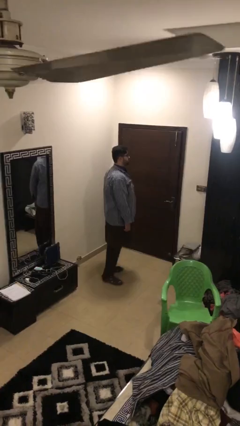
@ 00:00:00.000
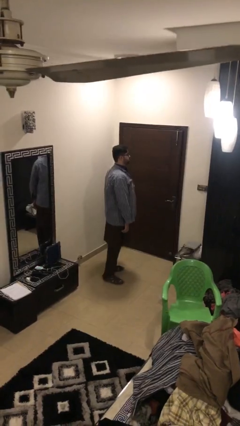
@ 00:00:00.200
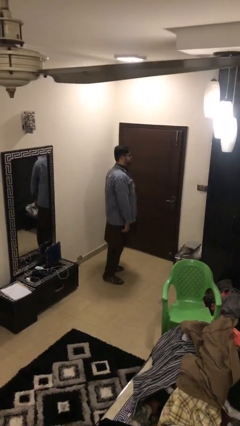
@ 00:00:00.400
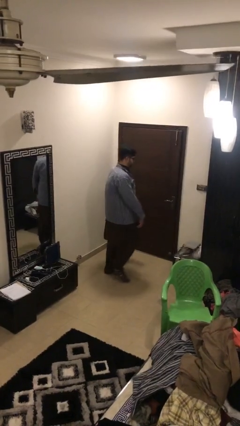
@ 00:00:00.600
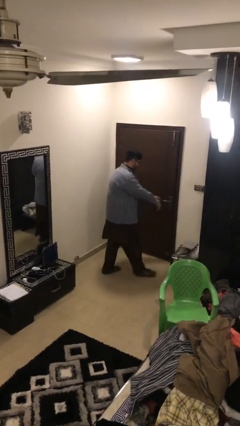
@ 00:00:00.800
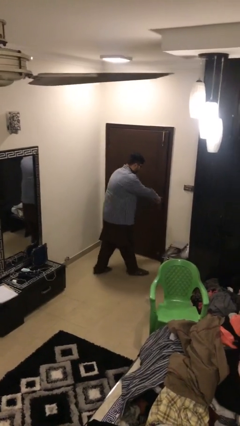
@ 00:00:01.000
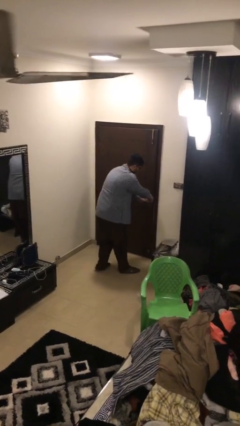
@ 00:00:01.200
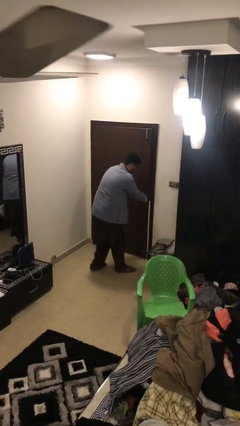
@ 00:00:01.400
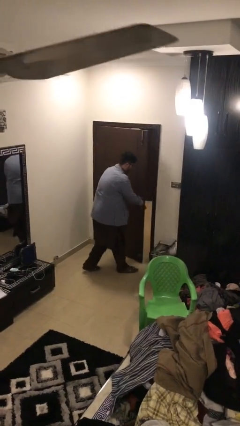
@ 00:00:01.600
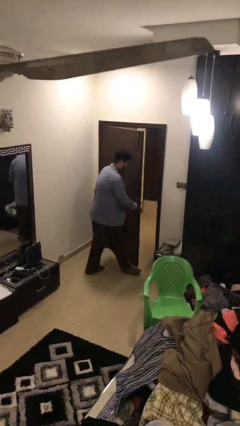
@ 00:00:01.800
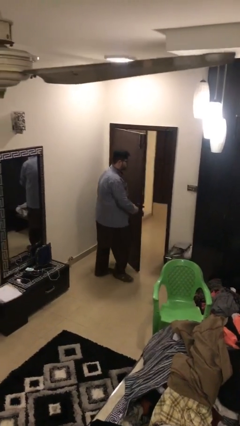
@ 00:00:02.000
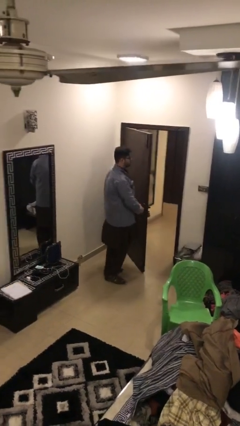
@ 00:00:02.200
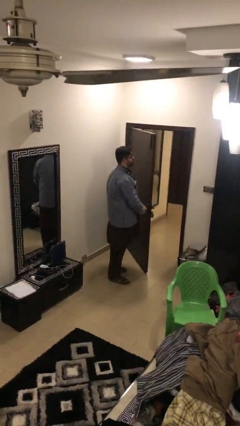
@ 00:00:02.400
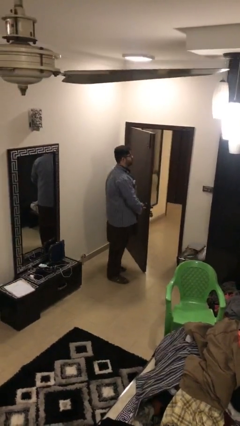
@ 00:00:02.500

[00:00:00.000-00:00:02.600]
person opens facility door

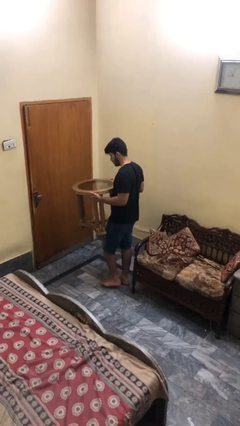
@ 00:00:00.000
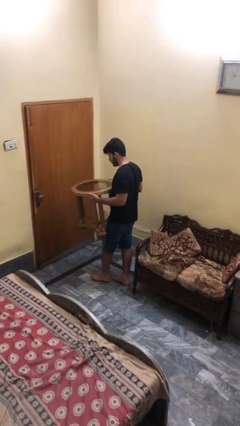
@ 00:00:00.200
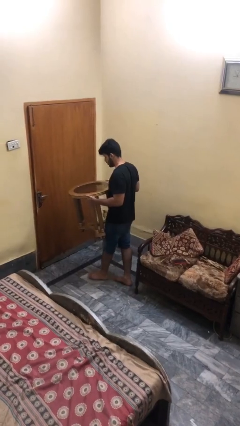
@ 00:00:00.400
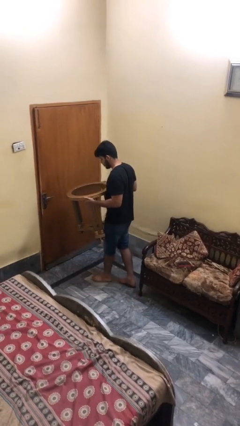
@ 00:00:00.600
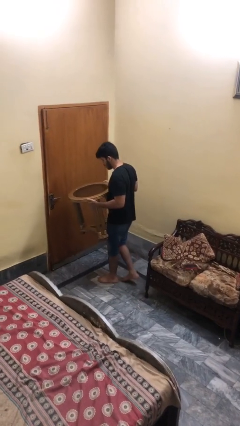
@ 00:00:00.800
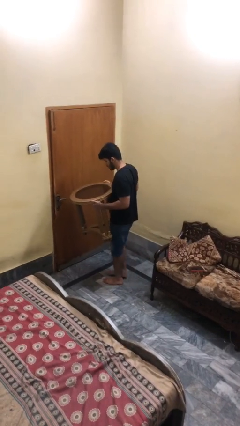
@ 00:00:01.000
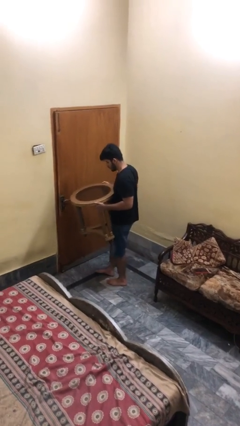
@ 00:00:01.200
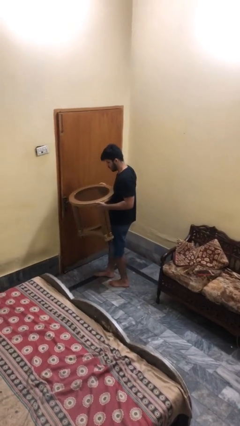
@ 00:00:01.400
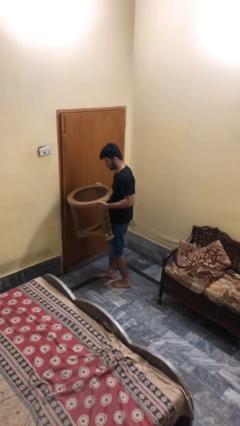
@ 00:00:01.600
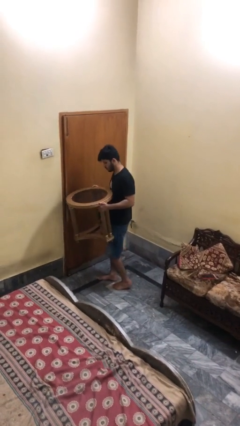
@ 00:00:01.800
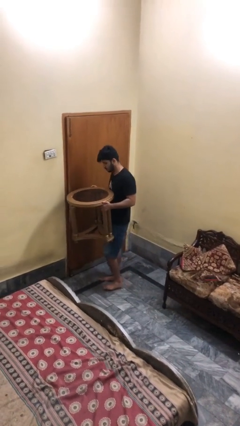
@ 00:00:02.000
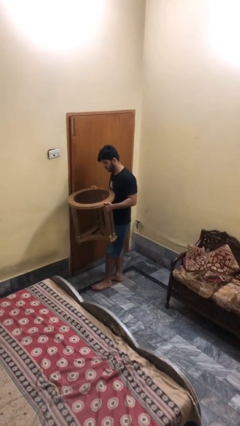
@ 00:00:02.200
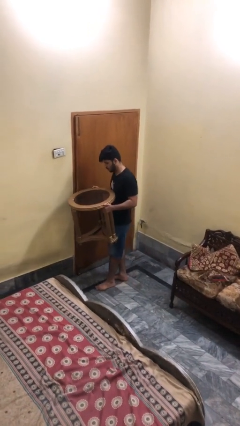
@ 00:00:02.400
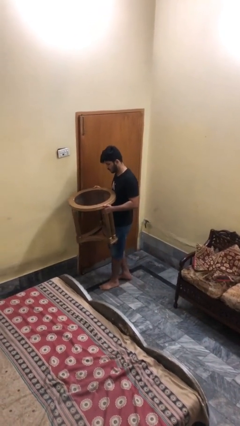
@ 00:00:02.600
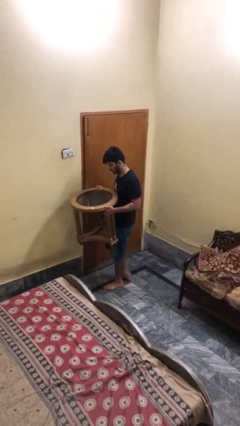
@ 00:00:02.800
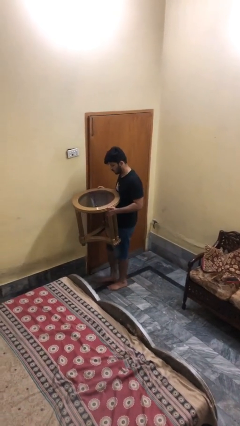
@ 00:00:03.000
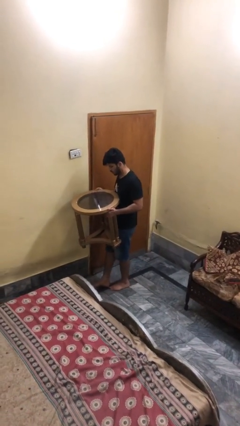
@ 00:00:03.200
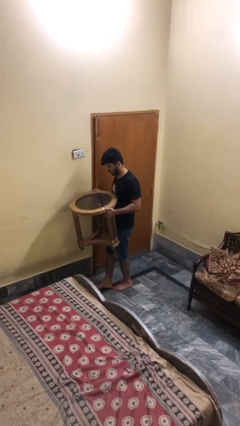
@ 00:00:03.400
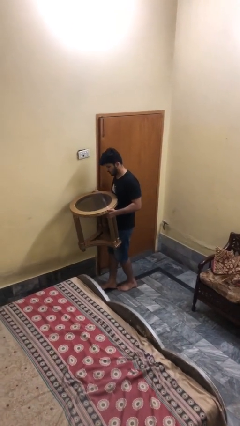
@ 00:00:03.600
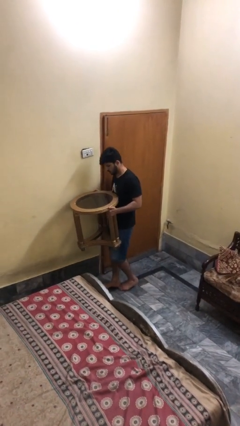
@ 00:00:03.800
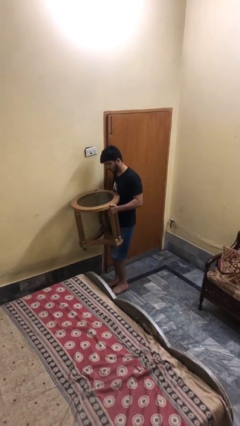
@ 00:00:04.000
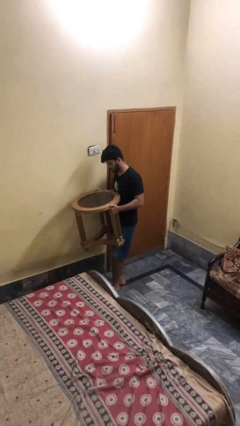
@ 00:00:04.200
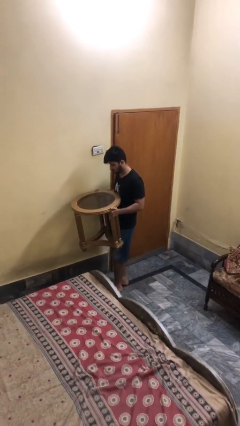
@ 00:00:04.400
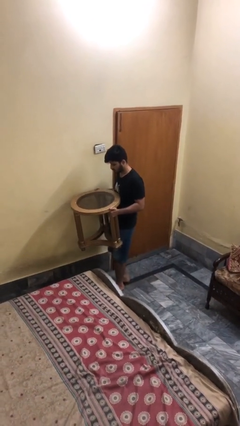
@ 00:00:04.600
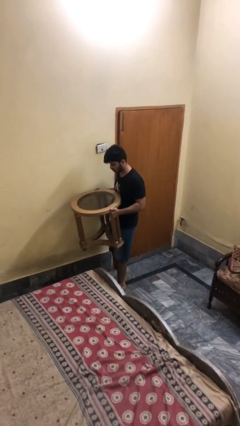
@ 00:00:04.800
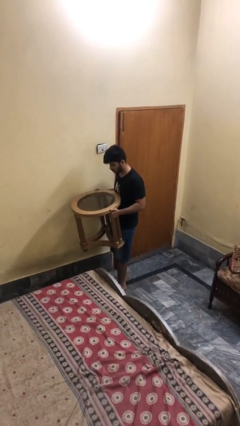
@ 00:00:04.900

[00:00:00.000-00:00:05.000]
person carries furniture

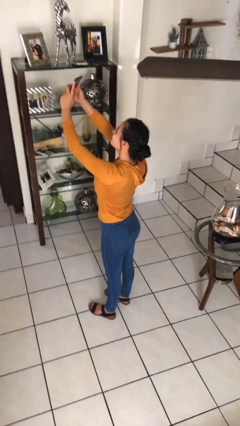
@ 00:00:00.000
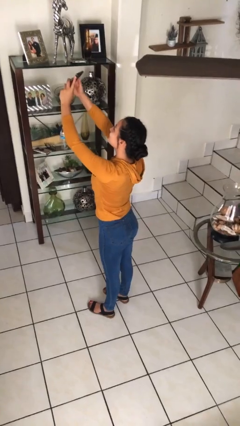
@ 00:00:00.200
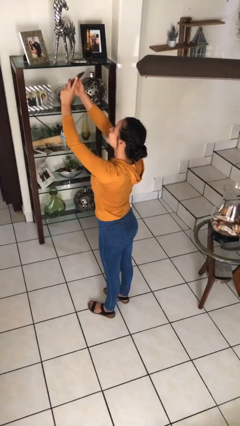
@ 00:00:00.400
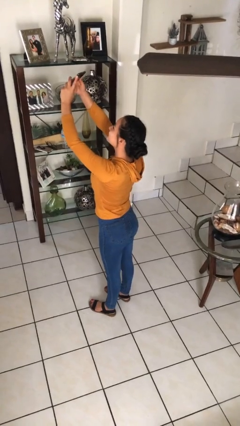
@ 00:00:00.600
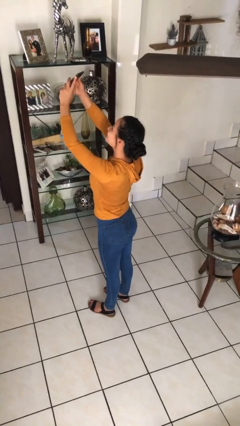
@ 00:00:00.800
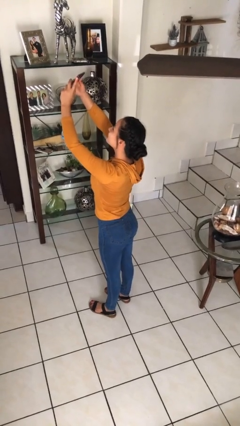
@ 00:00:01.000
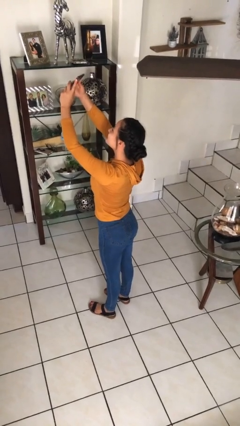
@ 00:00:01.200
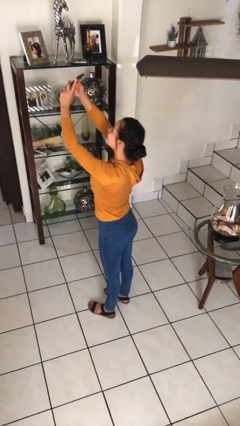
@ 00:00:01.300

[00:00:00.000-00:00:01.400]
person takes selfie

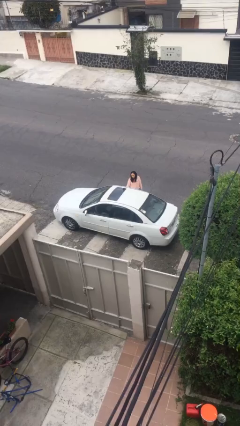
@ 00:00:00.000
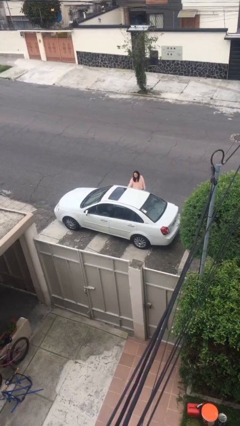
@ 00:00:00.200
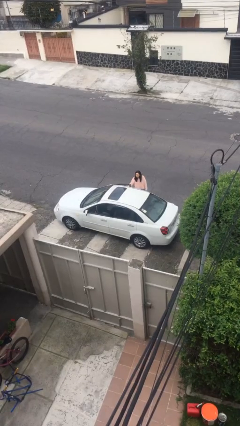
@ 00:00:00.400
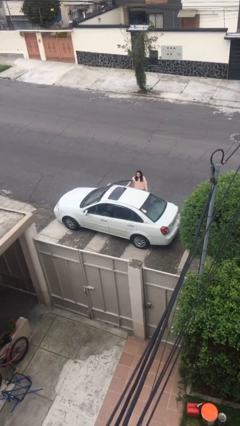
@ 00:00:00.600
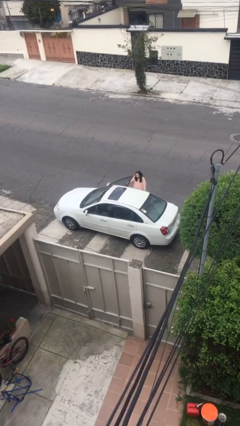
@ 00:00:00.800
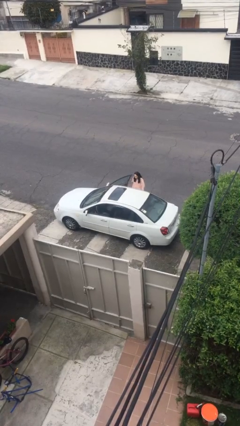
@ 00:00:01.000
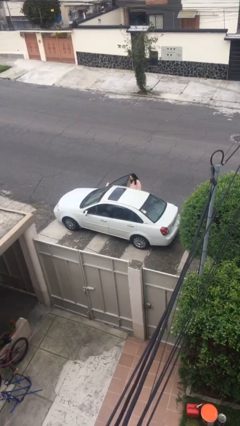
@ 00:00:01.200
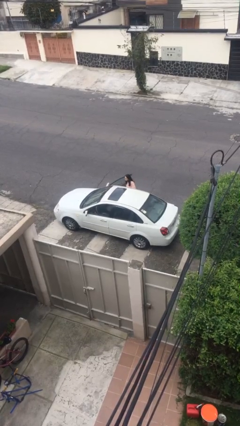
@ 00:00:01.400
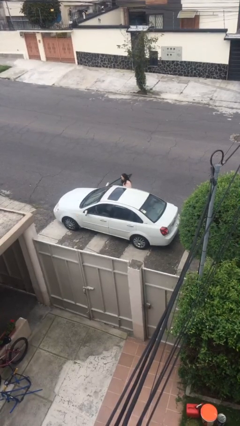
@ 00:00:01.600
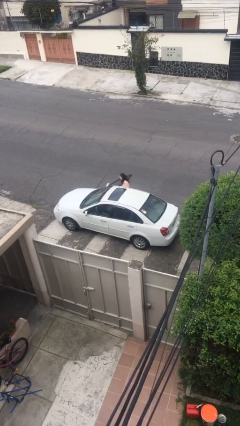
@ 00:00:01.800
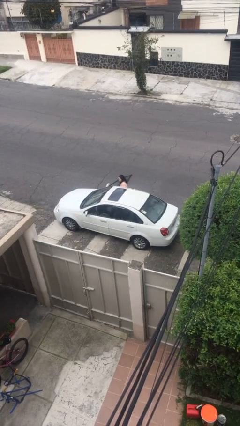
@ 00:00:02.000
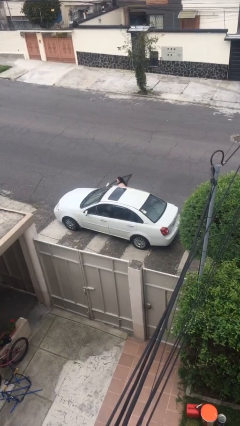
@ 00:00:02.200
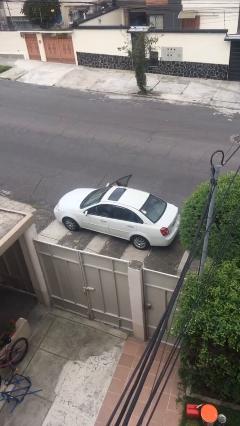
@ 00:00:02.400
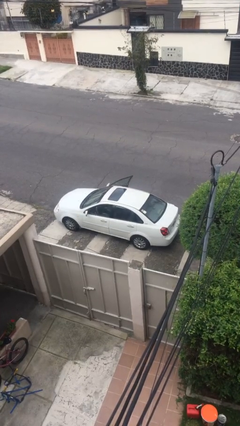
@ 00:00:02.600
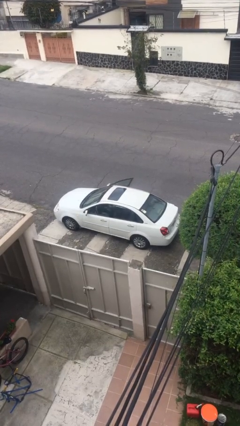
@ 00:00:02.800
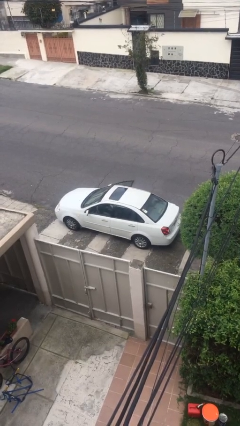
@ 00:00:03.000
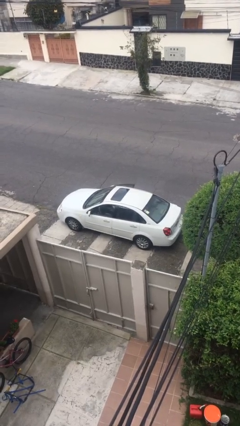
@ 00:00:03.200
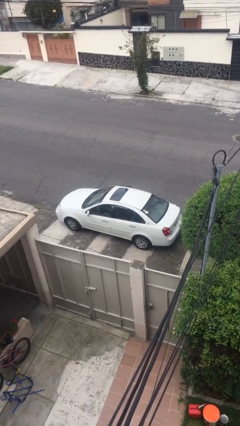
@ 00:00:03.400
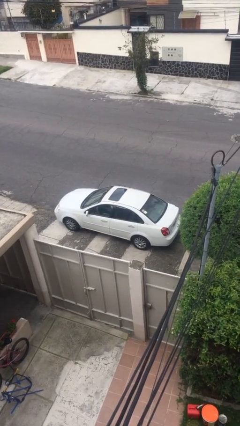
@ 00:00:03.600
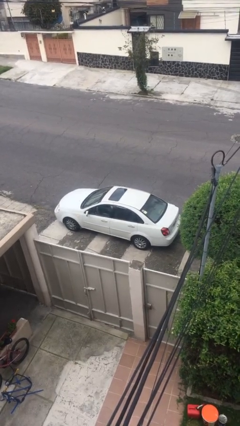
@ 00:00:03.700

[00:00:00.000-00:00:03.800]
car picks up person

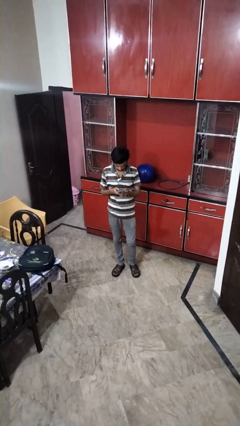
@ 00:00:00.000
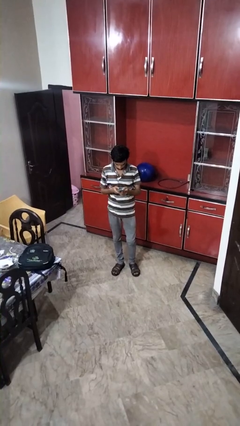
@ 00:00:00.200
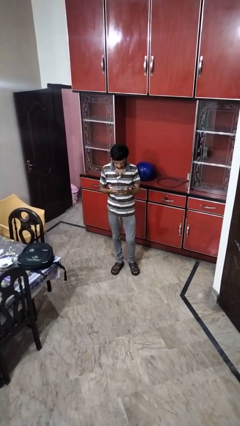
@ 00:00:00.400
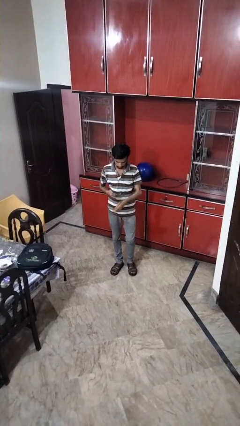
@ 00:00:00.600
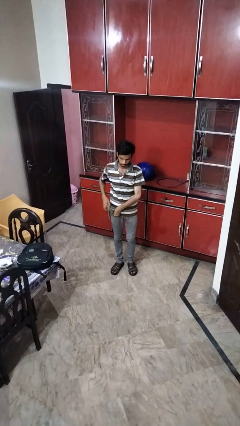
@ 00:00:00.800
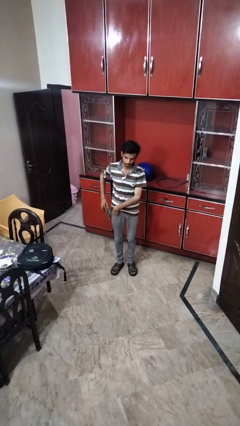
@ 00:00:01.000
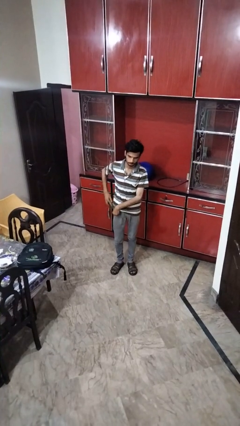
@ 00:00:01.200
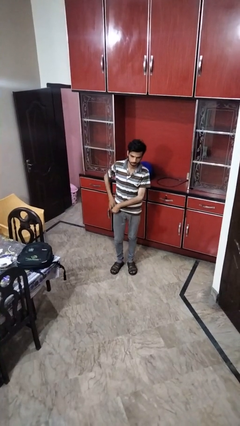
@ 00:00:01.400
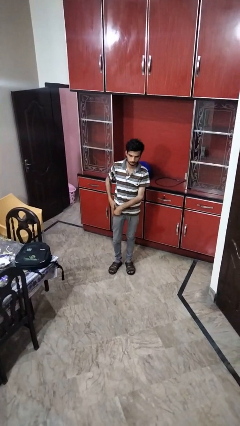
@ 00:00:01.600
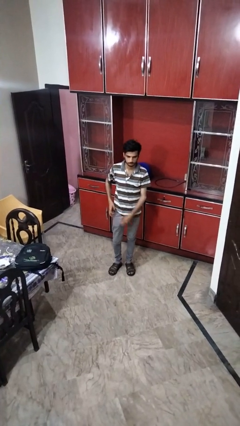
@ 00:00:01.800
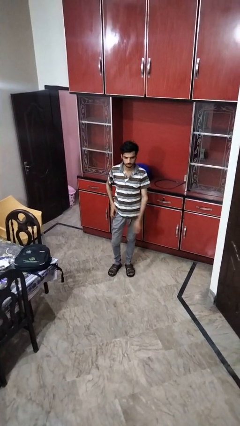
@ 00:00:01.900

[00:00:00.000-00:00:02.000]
person puts phone into pocket

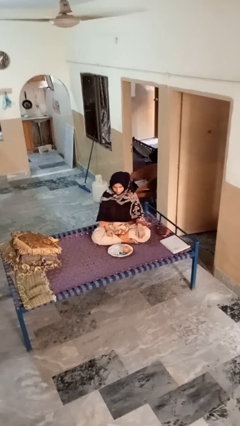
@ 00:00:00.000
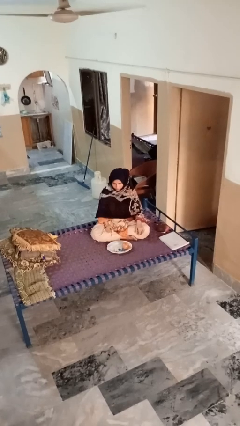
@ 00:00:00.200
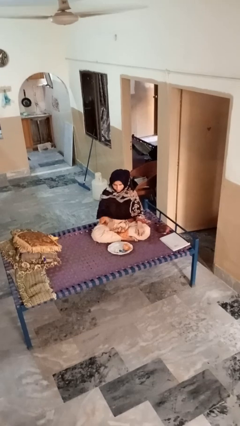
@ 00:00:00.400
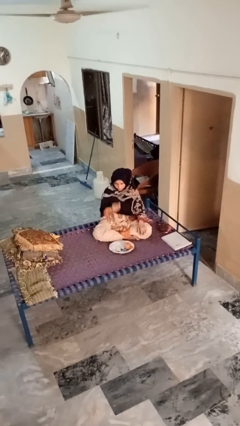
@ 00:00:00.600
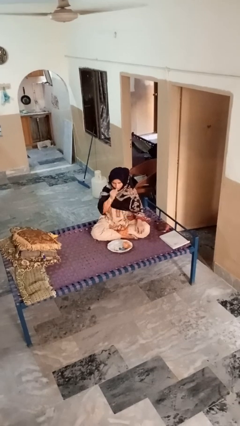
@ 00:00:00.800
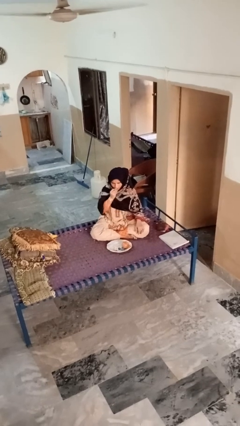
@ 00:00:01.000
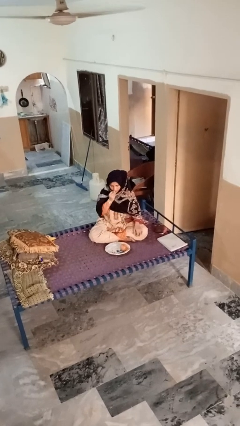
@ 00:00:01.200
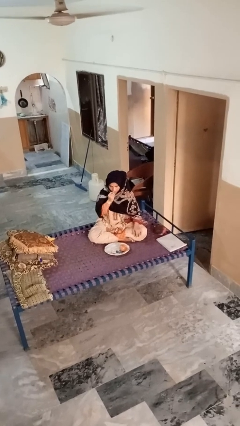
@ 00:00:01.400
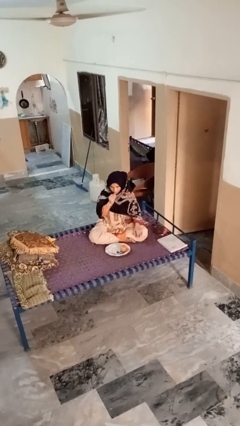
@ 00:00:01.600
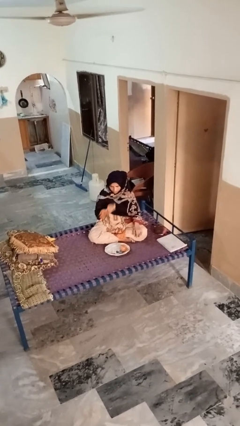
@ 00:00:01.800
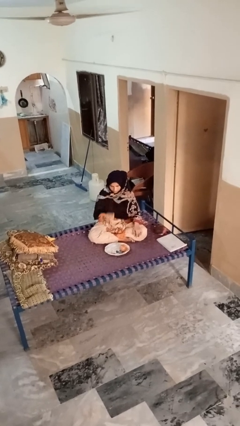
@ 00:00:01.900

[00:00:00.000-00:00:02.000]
person eats apple

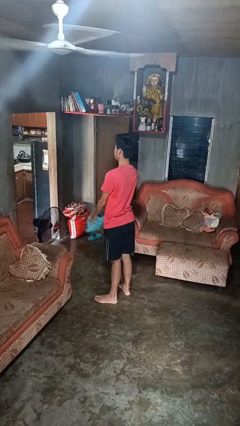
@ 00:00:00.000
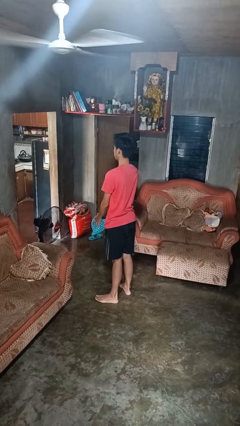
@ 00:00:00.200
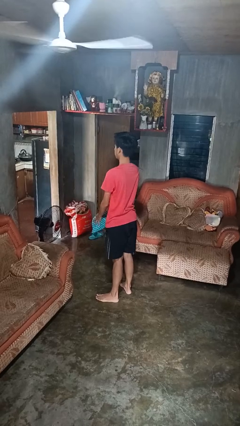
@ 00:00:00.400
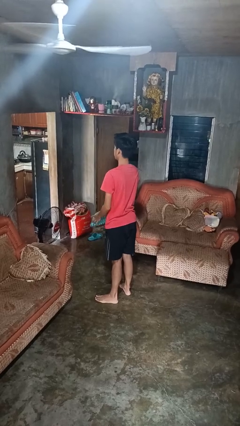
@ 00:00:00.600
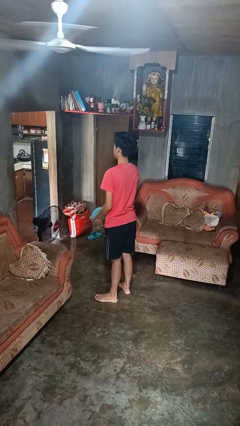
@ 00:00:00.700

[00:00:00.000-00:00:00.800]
person catches dropped object
